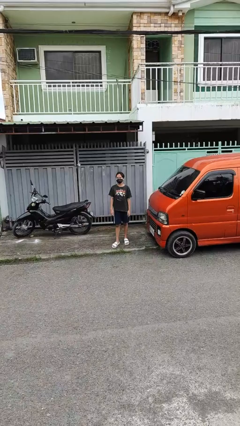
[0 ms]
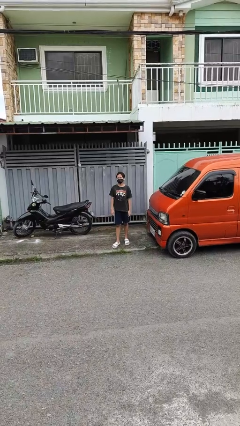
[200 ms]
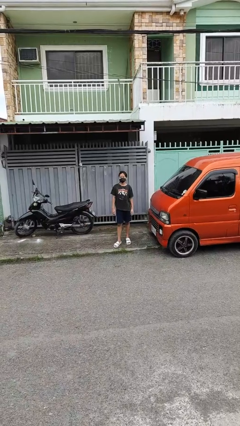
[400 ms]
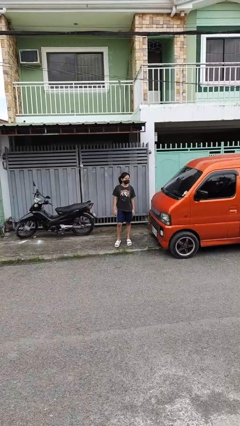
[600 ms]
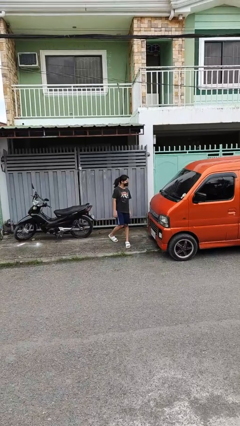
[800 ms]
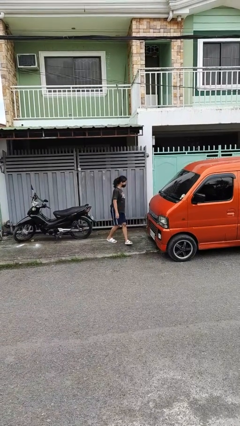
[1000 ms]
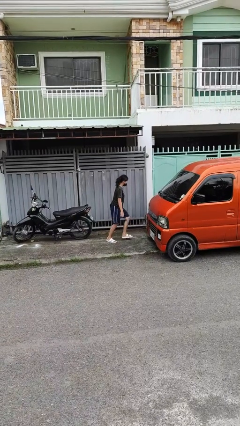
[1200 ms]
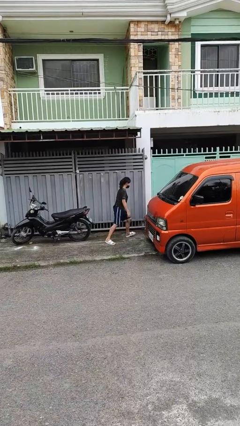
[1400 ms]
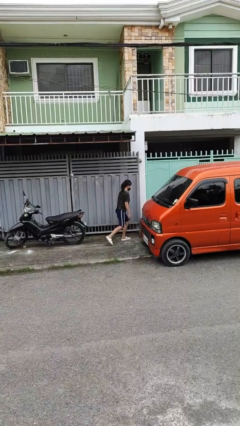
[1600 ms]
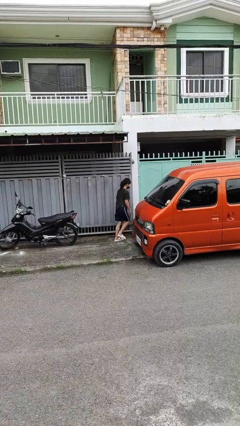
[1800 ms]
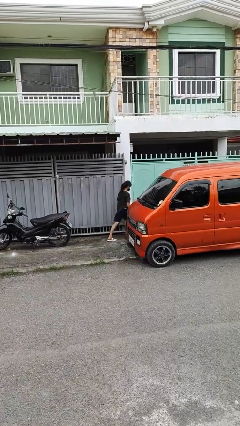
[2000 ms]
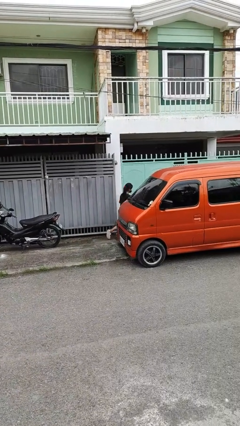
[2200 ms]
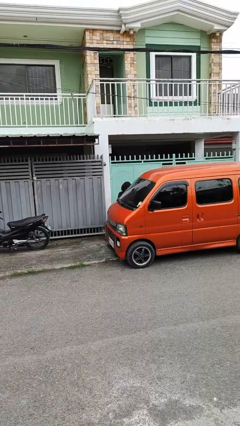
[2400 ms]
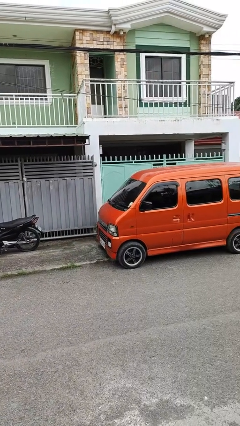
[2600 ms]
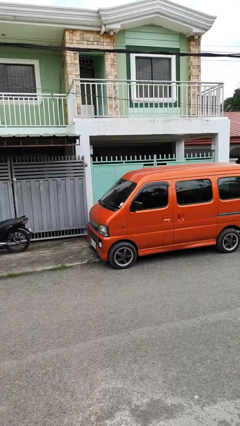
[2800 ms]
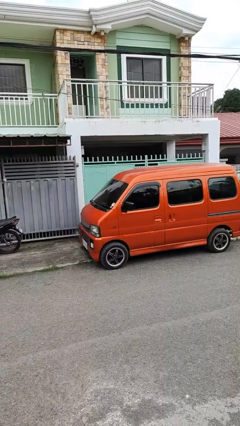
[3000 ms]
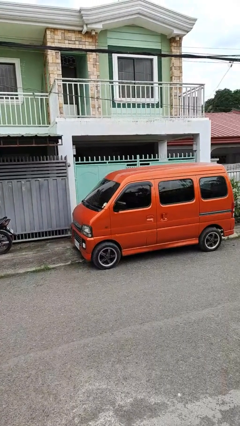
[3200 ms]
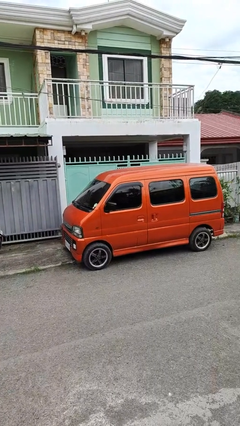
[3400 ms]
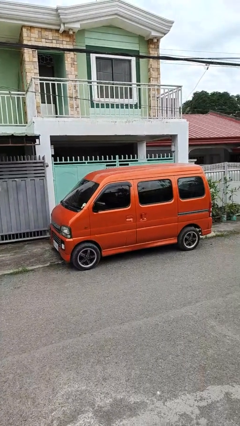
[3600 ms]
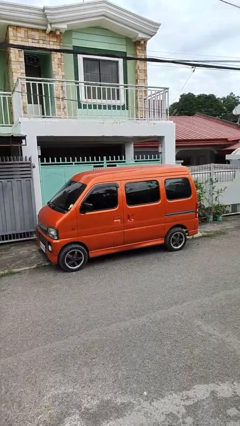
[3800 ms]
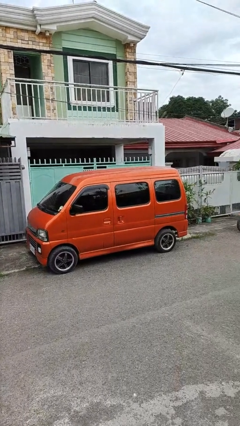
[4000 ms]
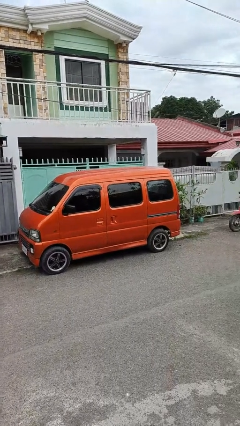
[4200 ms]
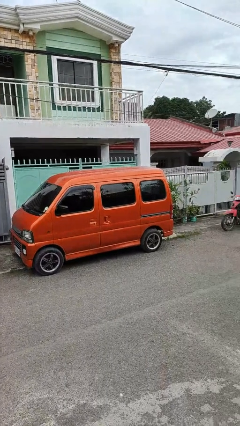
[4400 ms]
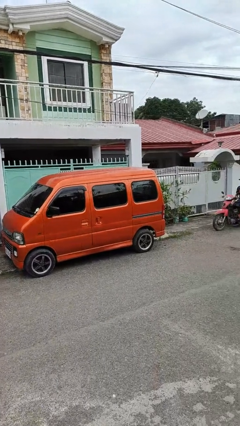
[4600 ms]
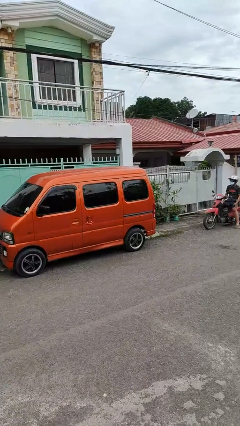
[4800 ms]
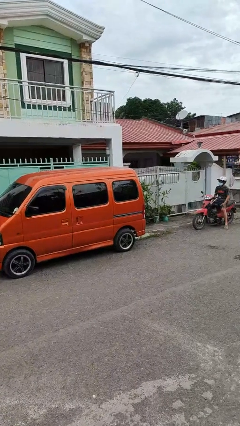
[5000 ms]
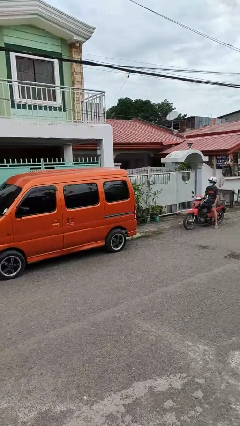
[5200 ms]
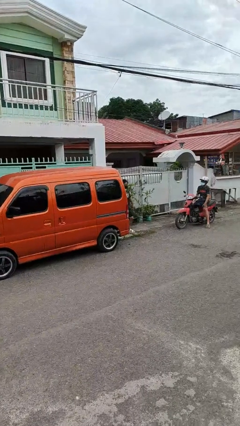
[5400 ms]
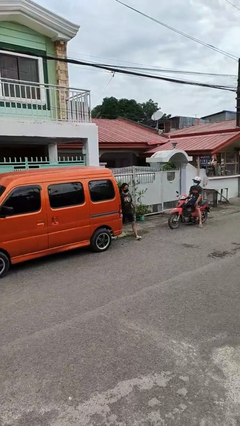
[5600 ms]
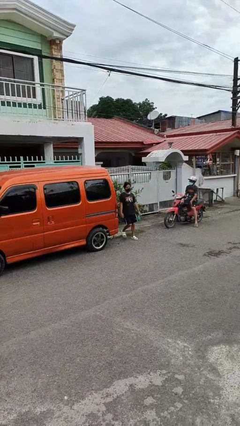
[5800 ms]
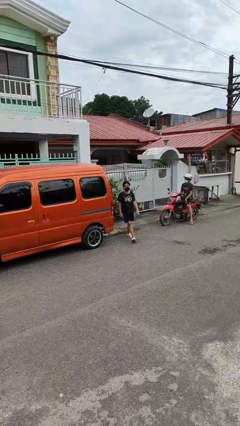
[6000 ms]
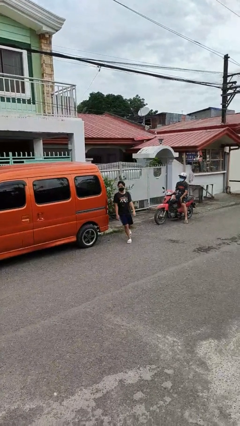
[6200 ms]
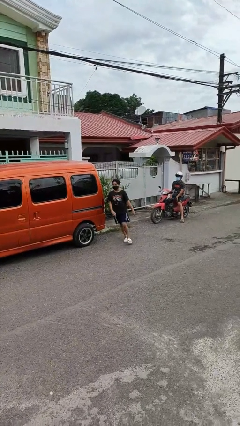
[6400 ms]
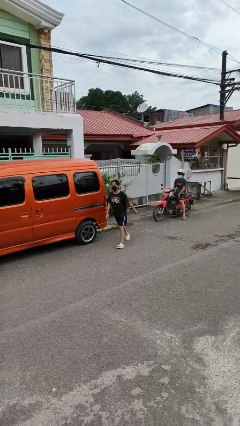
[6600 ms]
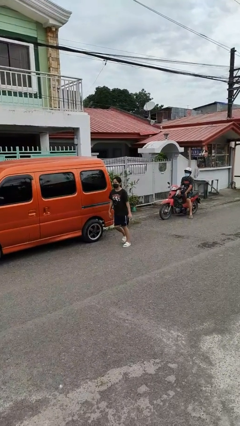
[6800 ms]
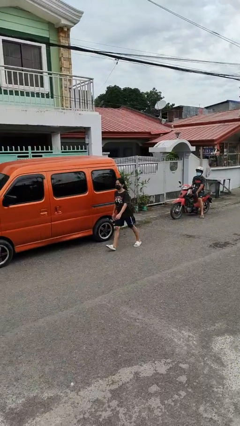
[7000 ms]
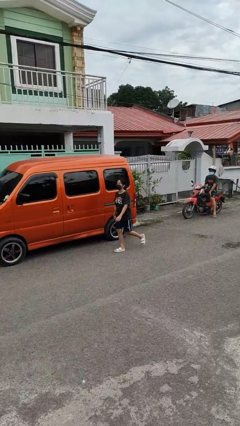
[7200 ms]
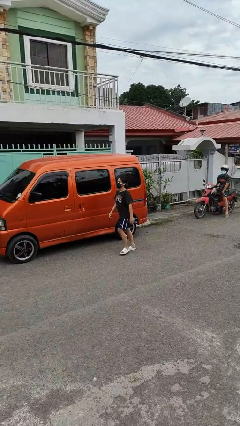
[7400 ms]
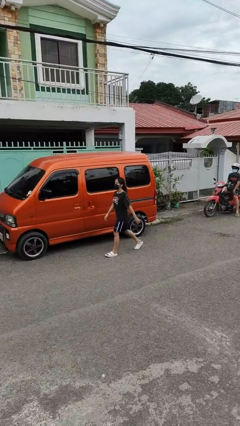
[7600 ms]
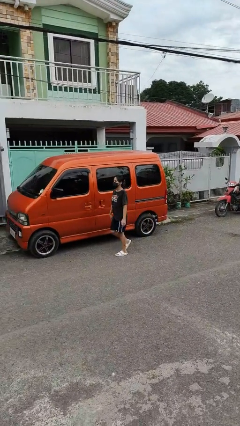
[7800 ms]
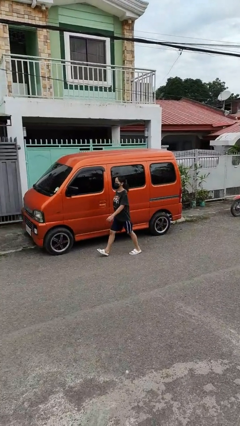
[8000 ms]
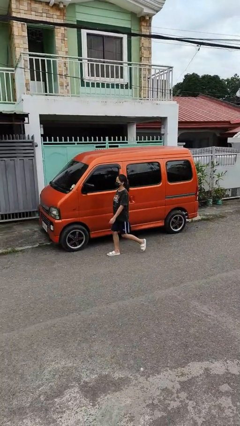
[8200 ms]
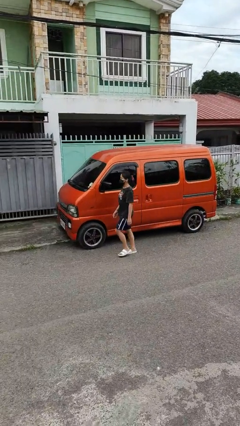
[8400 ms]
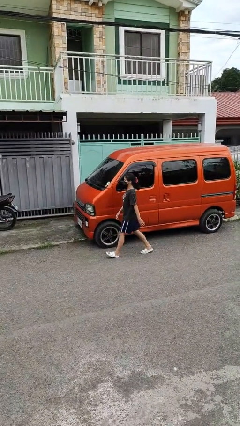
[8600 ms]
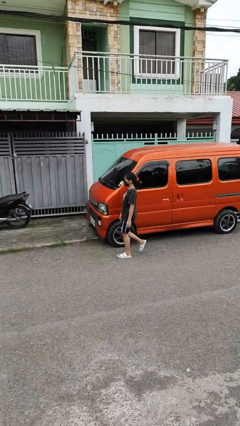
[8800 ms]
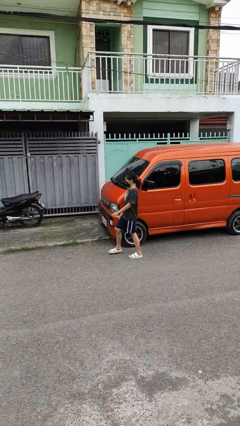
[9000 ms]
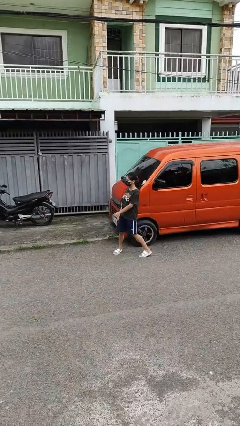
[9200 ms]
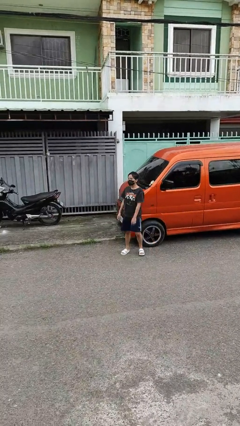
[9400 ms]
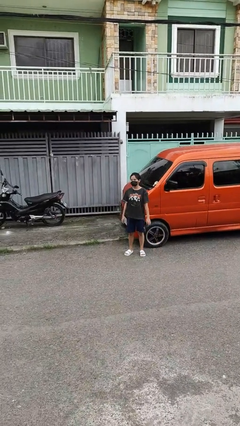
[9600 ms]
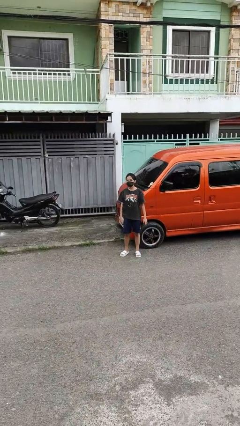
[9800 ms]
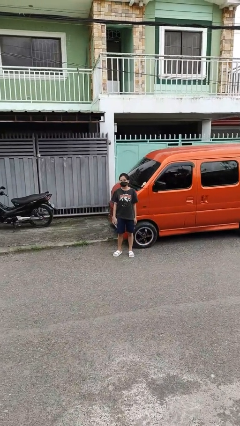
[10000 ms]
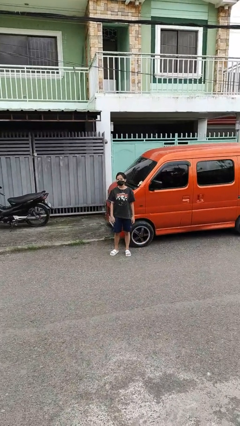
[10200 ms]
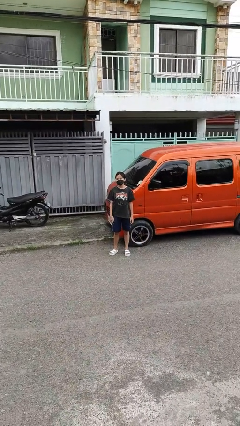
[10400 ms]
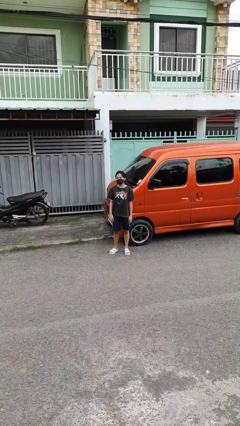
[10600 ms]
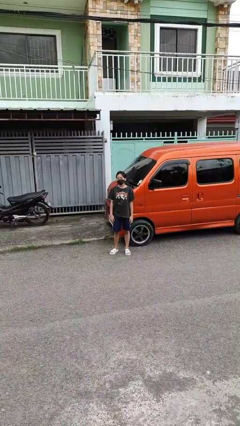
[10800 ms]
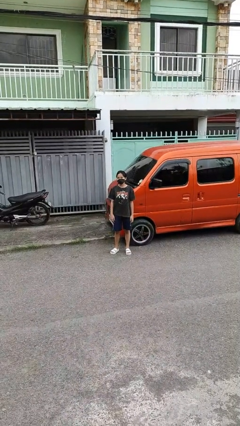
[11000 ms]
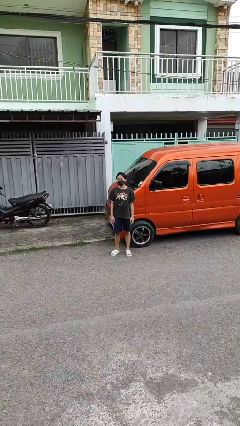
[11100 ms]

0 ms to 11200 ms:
person walks around car

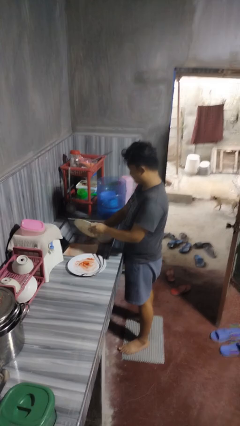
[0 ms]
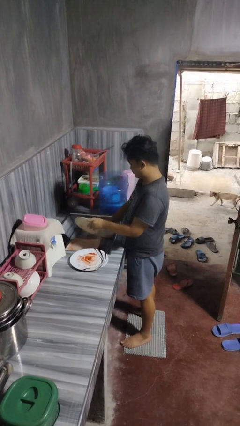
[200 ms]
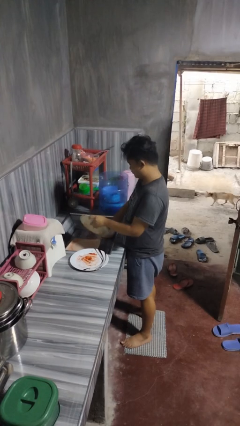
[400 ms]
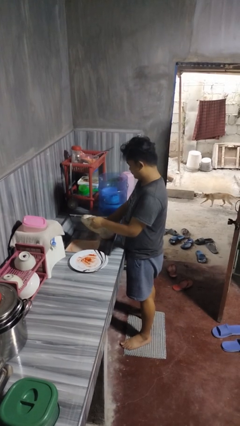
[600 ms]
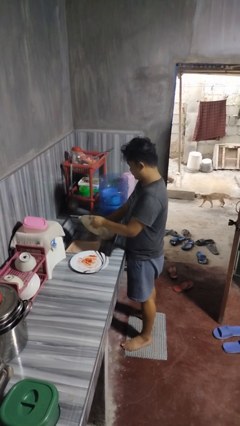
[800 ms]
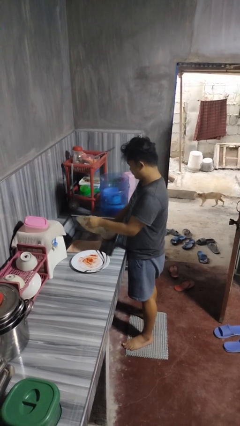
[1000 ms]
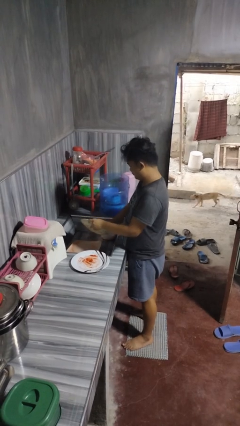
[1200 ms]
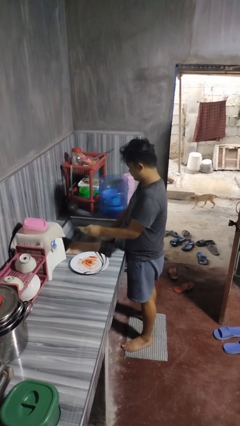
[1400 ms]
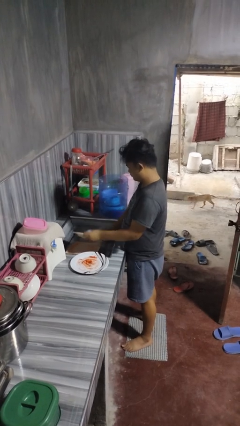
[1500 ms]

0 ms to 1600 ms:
person washes dish

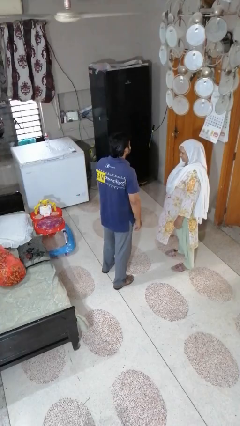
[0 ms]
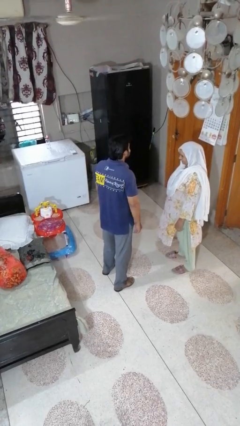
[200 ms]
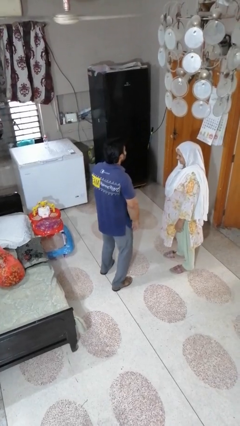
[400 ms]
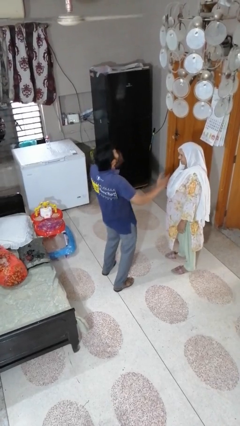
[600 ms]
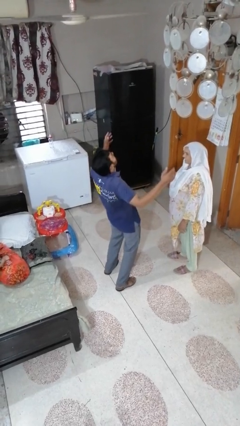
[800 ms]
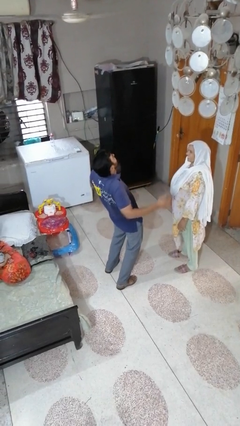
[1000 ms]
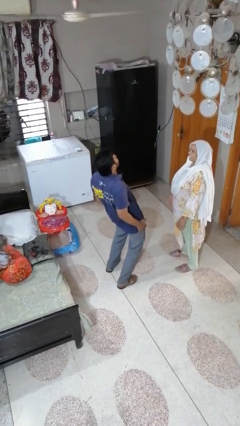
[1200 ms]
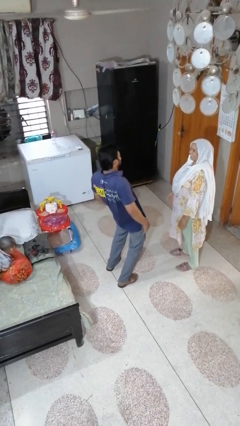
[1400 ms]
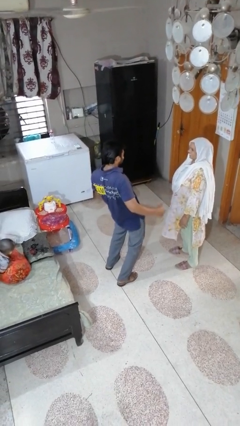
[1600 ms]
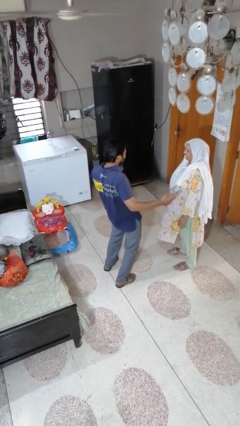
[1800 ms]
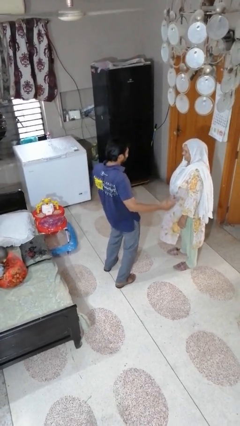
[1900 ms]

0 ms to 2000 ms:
person laughs with person

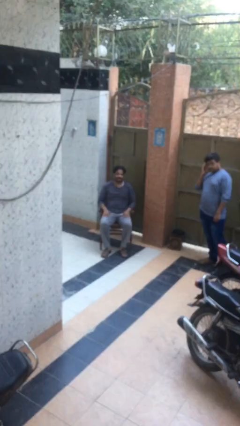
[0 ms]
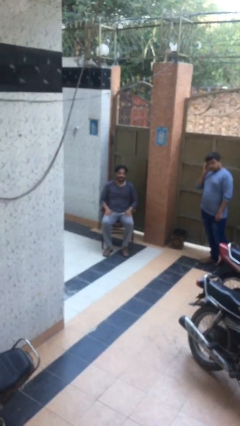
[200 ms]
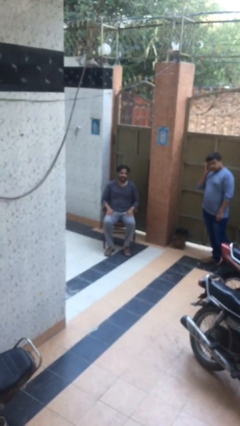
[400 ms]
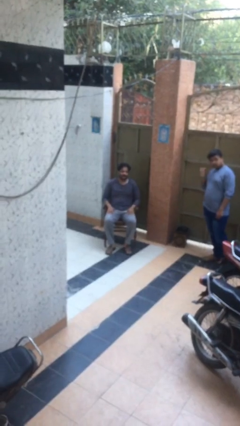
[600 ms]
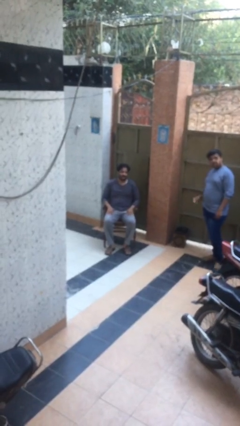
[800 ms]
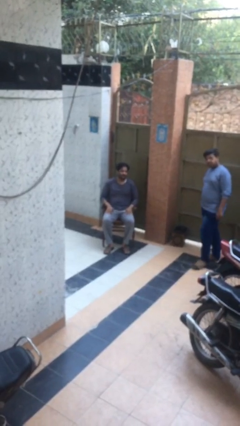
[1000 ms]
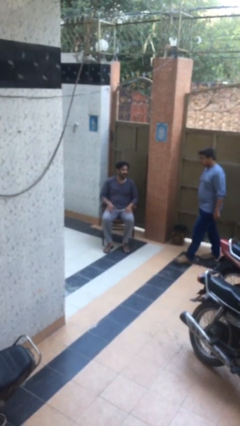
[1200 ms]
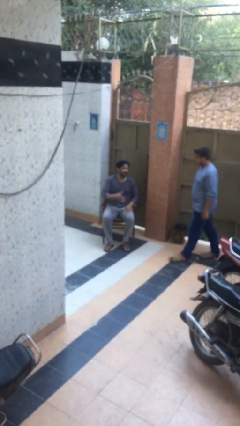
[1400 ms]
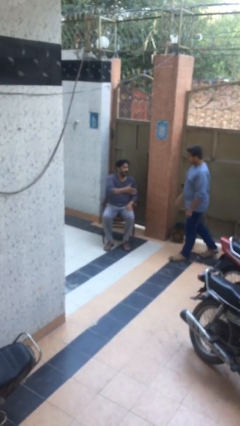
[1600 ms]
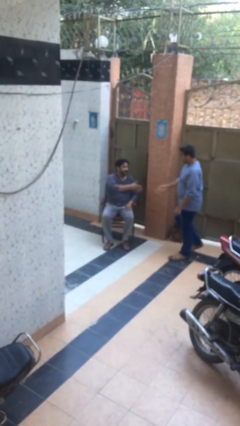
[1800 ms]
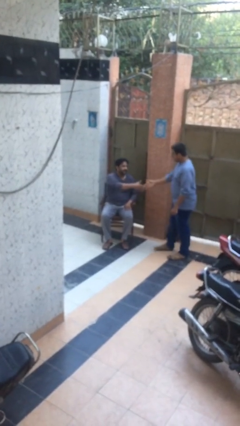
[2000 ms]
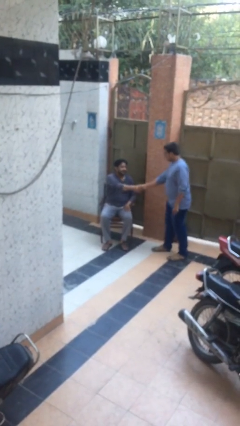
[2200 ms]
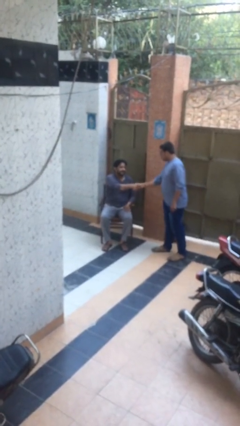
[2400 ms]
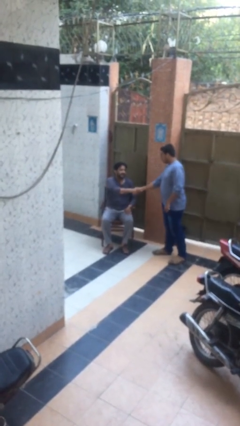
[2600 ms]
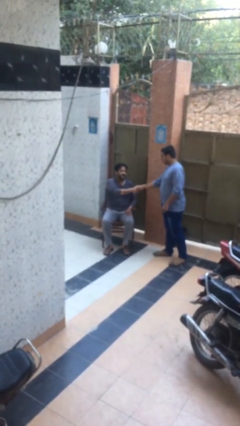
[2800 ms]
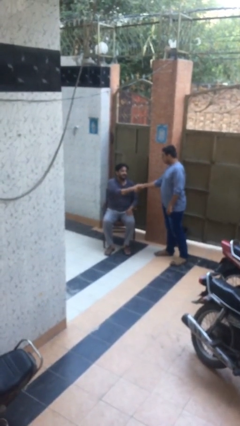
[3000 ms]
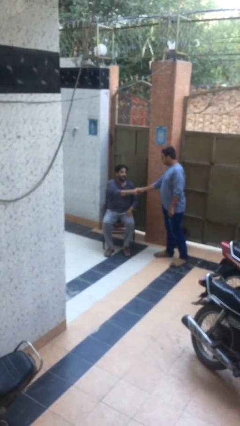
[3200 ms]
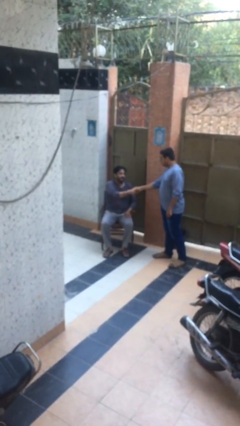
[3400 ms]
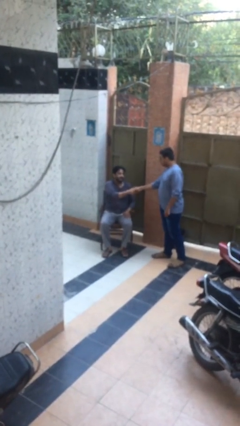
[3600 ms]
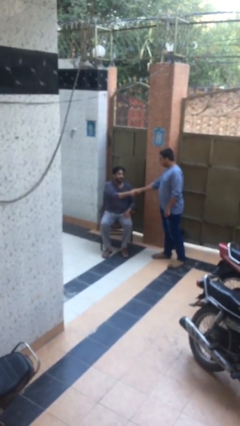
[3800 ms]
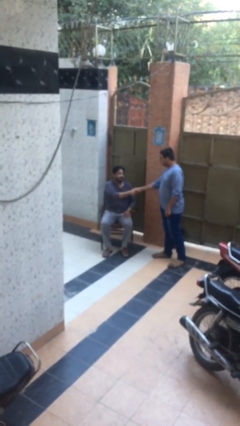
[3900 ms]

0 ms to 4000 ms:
person shakes hand
